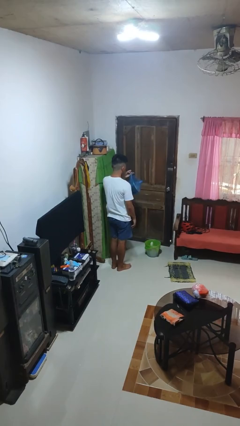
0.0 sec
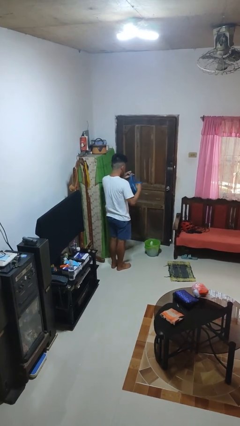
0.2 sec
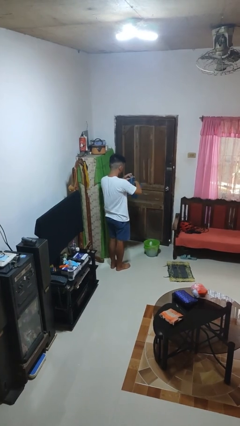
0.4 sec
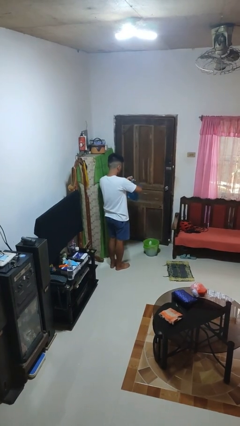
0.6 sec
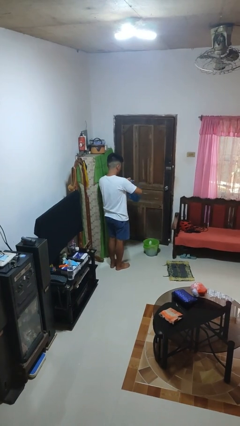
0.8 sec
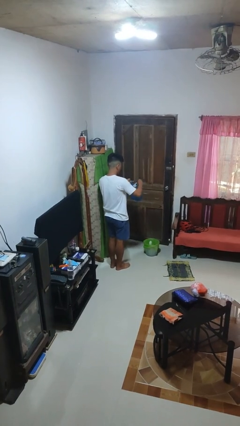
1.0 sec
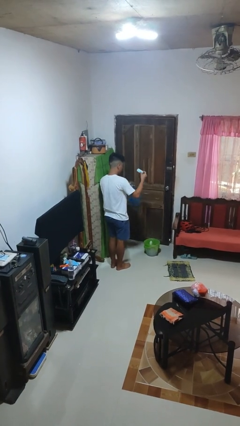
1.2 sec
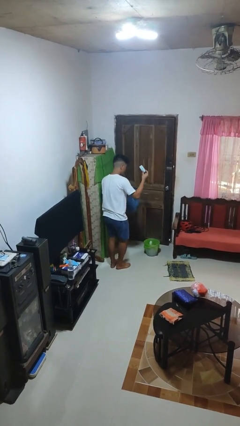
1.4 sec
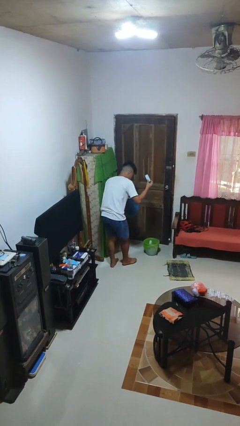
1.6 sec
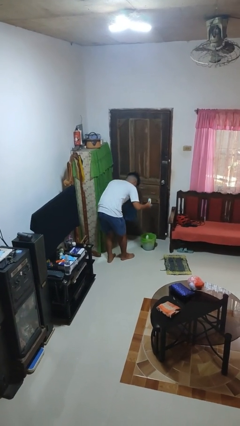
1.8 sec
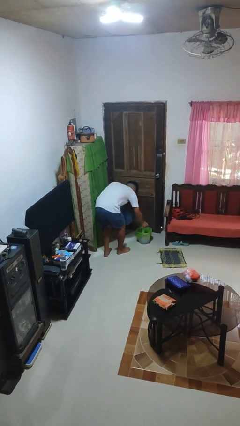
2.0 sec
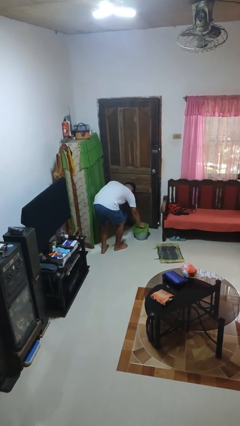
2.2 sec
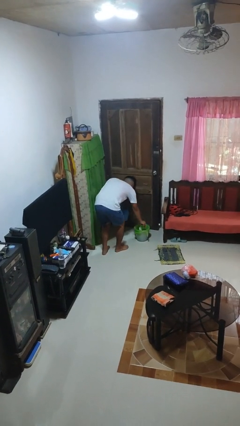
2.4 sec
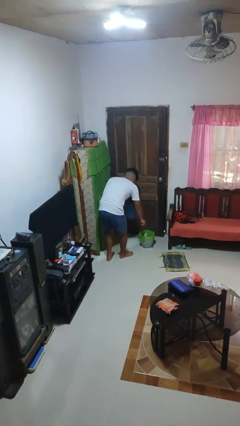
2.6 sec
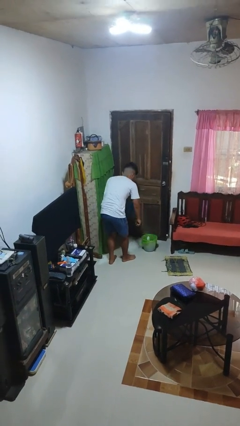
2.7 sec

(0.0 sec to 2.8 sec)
person discards trash

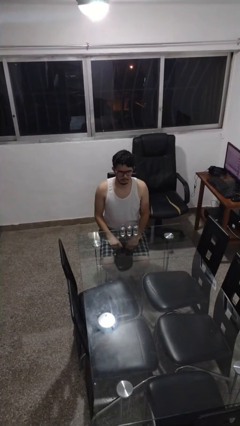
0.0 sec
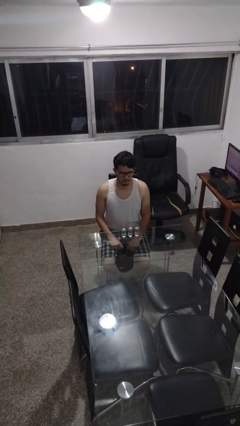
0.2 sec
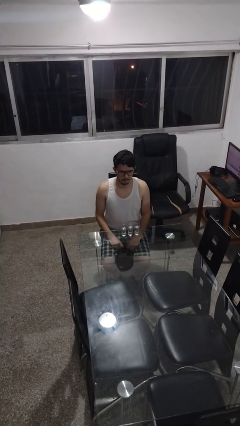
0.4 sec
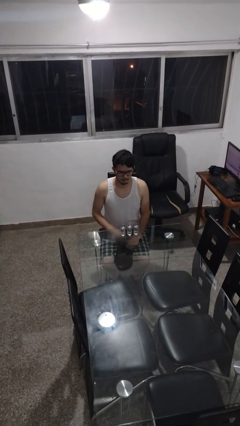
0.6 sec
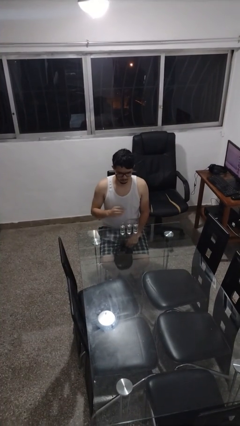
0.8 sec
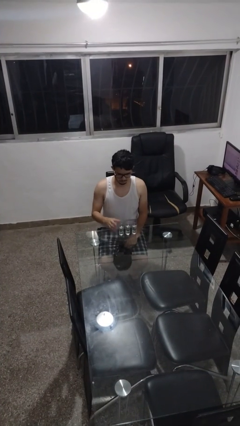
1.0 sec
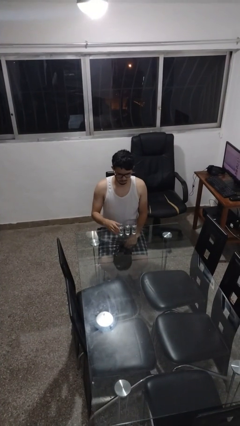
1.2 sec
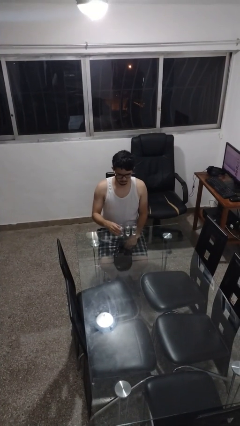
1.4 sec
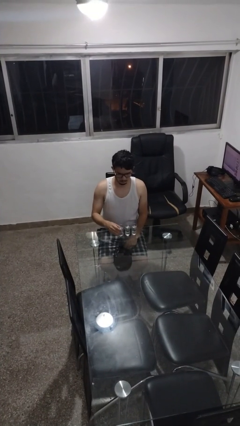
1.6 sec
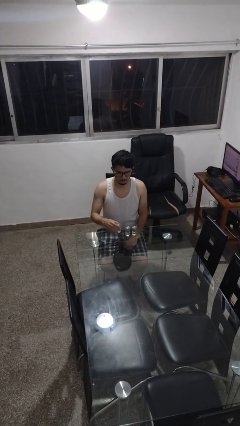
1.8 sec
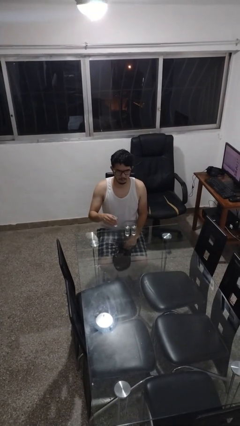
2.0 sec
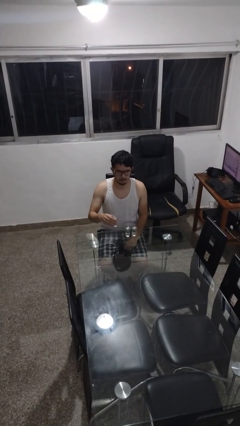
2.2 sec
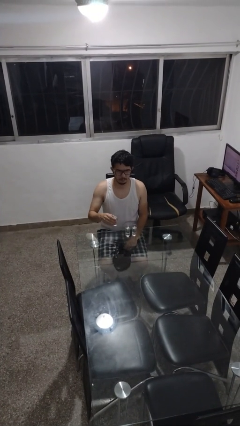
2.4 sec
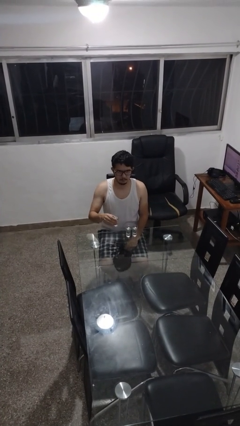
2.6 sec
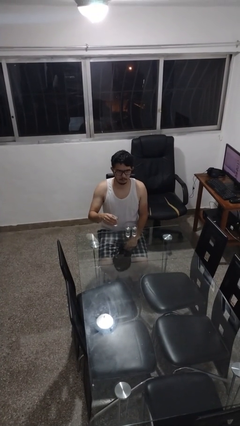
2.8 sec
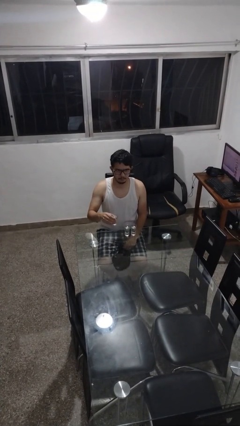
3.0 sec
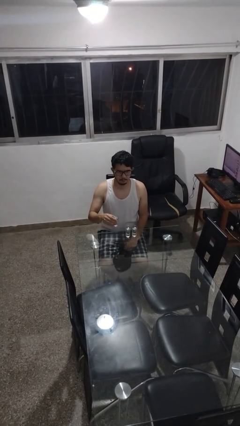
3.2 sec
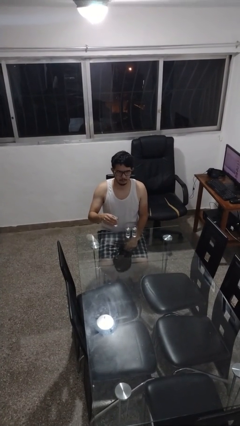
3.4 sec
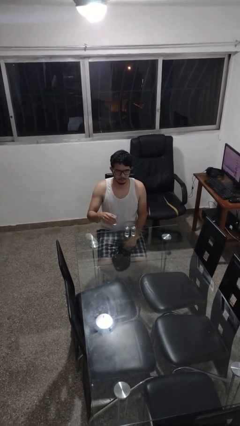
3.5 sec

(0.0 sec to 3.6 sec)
person picks up object from table

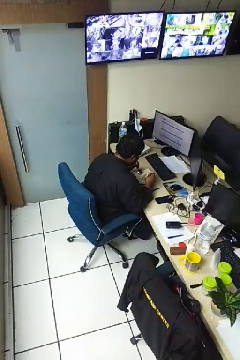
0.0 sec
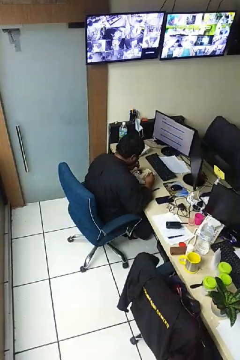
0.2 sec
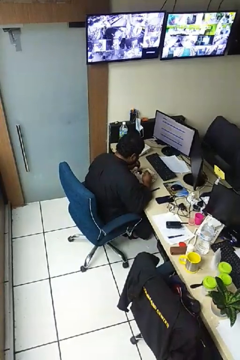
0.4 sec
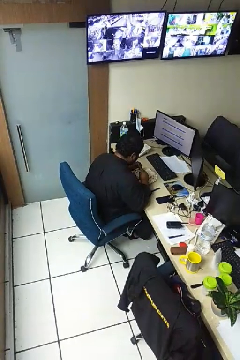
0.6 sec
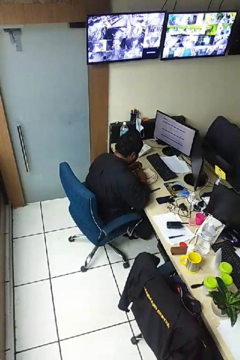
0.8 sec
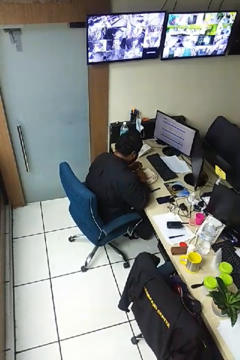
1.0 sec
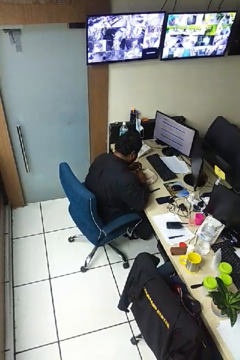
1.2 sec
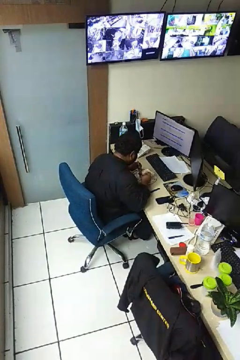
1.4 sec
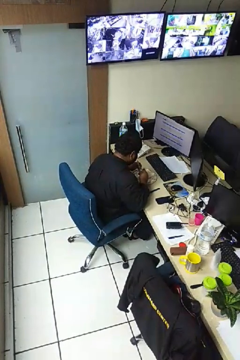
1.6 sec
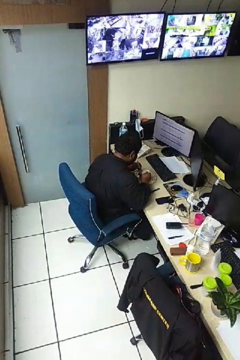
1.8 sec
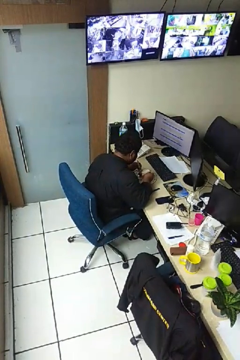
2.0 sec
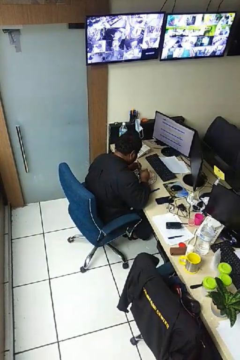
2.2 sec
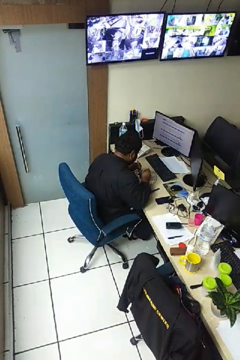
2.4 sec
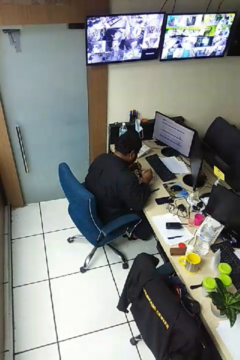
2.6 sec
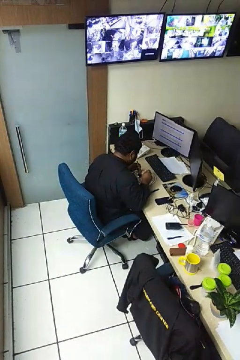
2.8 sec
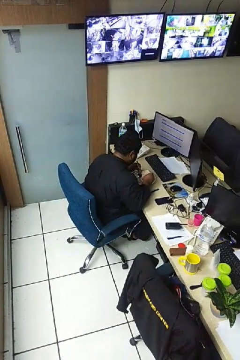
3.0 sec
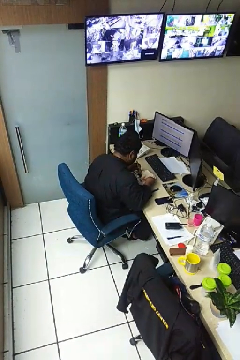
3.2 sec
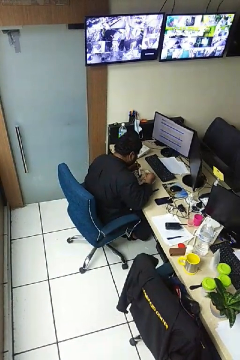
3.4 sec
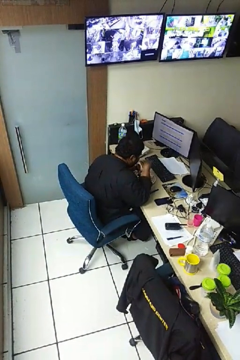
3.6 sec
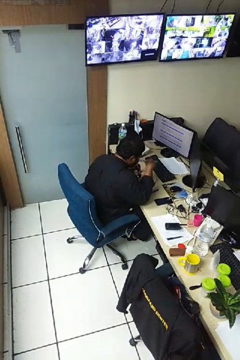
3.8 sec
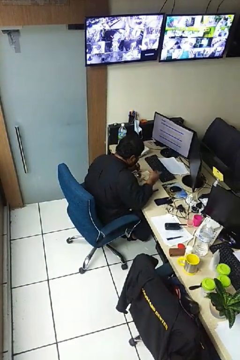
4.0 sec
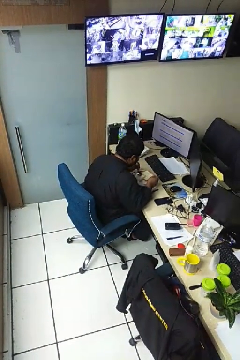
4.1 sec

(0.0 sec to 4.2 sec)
person eats with utensil

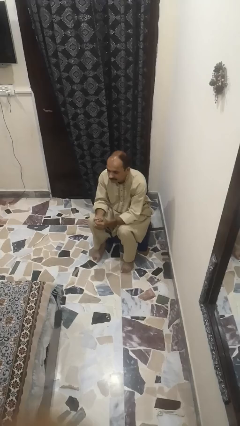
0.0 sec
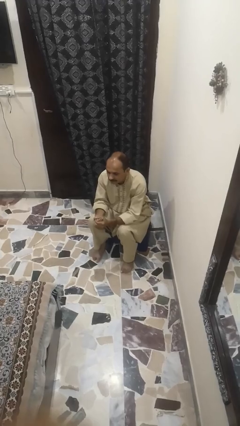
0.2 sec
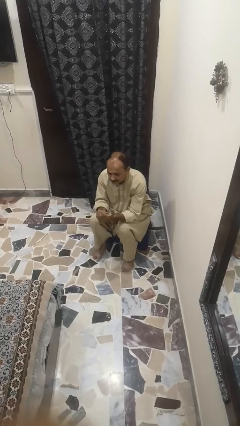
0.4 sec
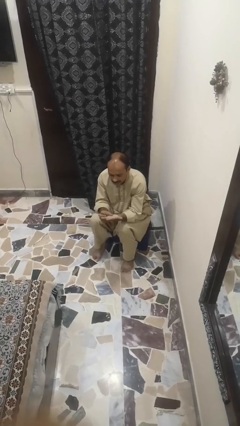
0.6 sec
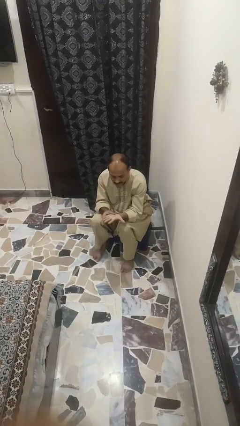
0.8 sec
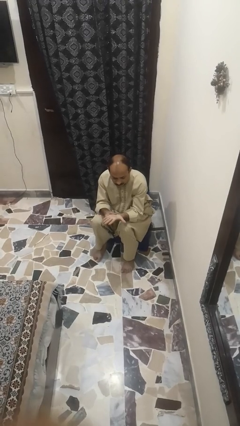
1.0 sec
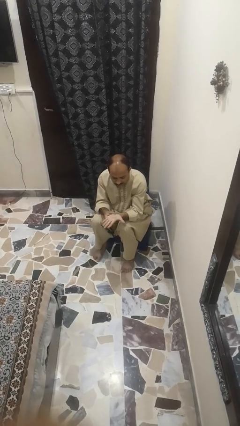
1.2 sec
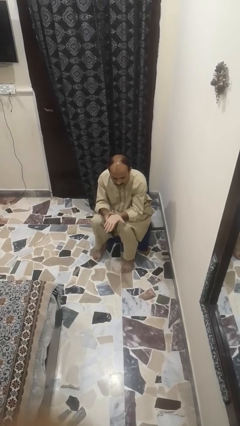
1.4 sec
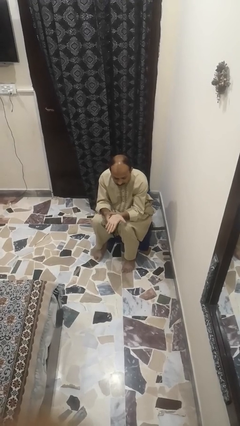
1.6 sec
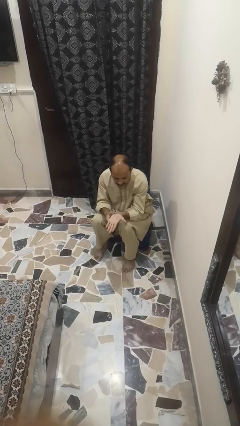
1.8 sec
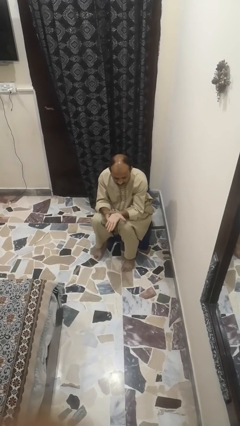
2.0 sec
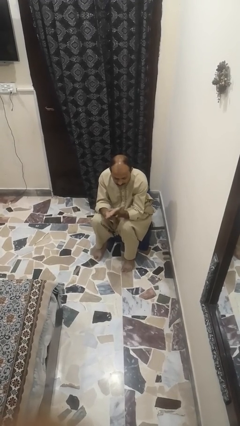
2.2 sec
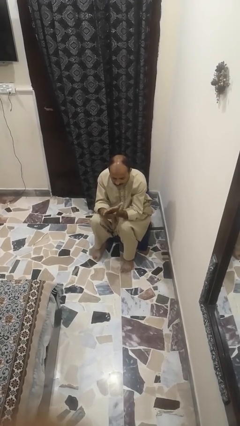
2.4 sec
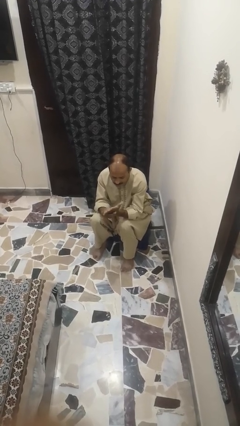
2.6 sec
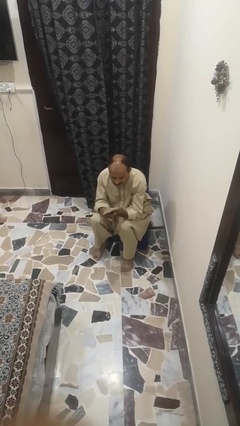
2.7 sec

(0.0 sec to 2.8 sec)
person looks at hands in lap

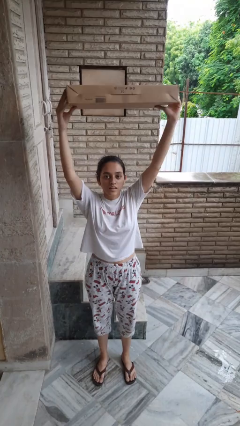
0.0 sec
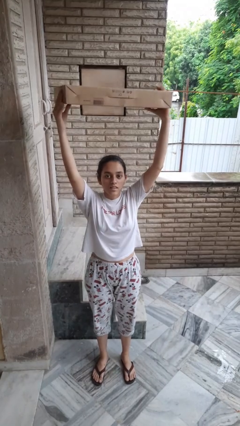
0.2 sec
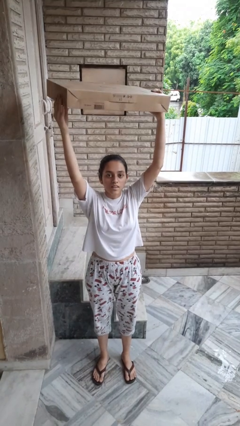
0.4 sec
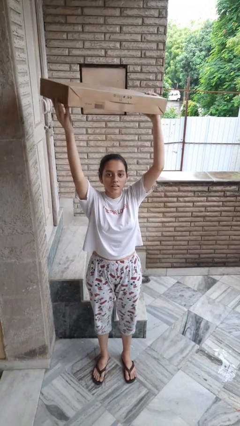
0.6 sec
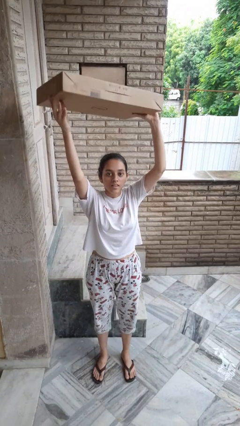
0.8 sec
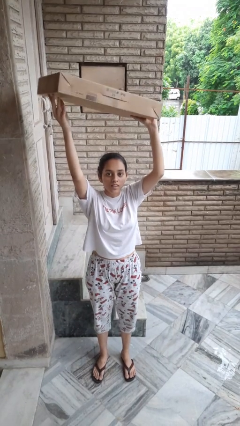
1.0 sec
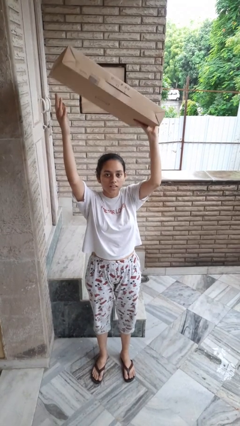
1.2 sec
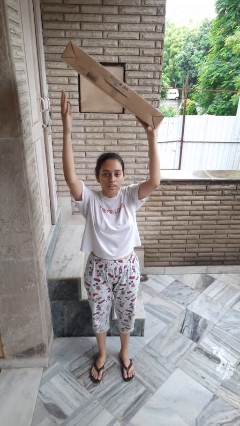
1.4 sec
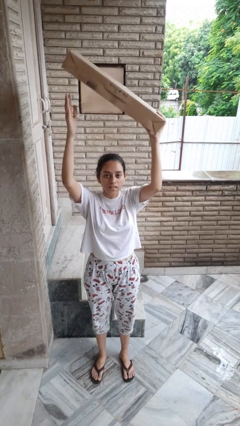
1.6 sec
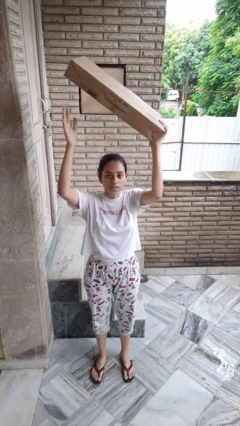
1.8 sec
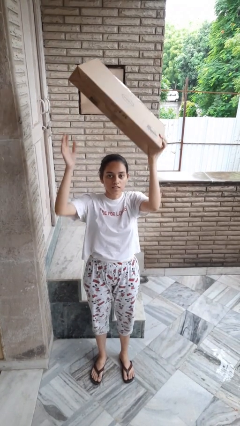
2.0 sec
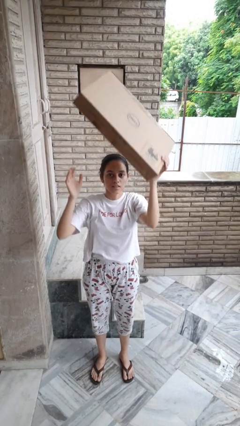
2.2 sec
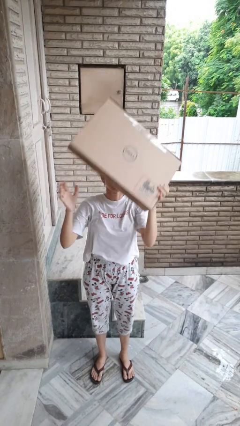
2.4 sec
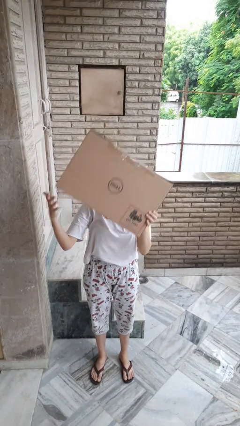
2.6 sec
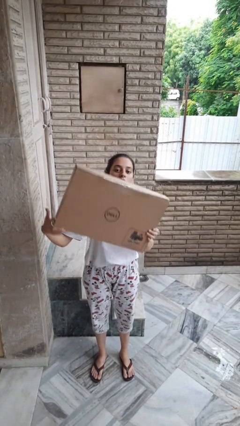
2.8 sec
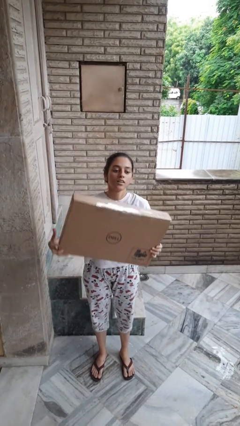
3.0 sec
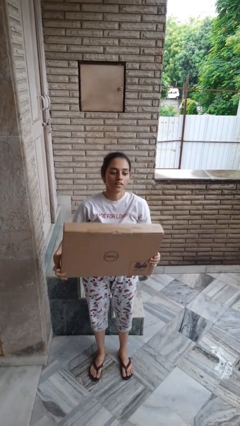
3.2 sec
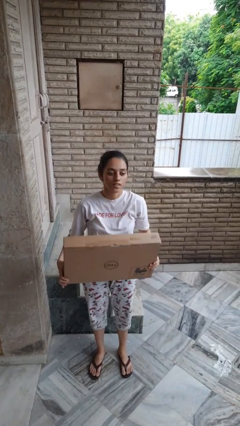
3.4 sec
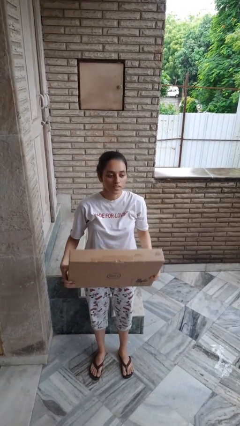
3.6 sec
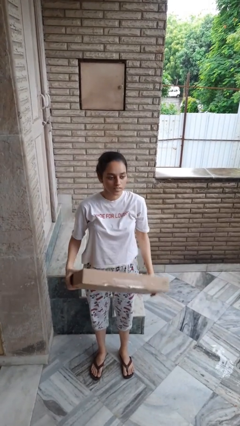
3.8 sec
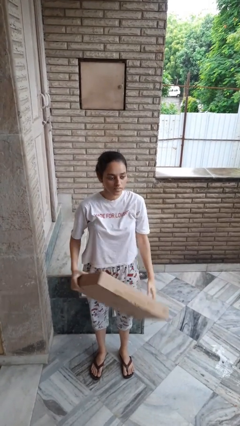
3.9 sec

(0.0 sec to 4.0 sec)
person holds object above head

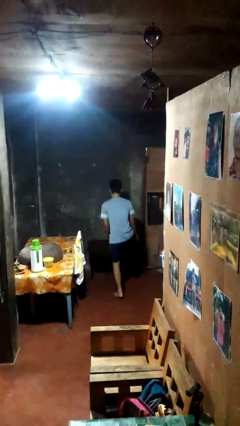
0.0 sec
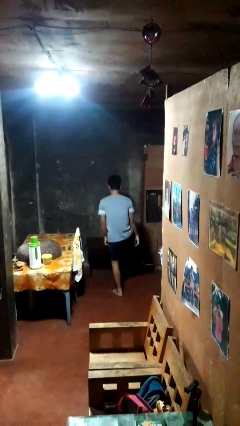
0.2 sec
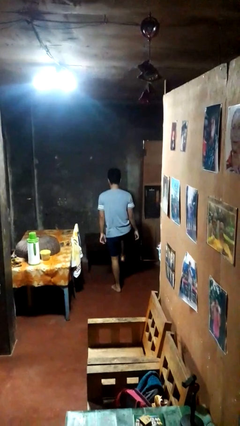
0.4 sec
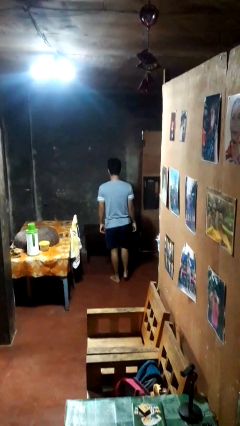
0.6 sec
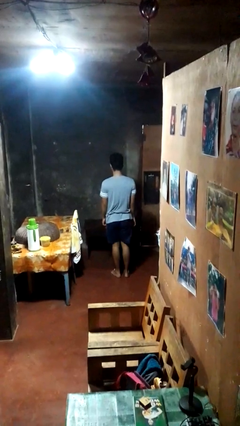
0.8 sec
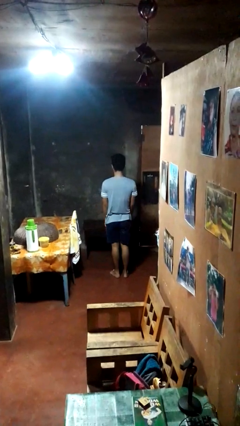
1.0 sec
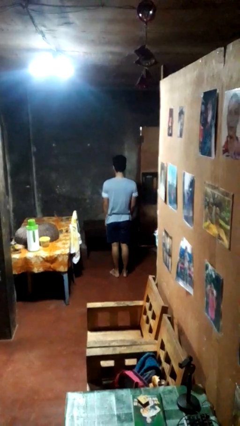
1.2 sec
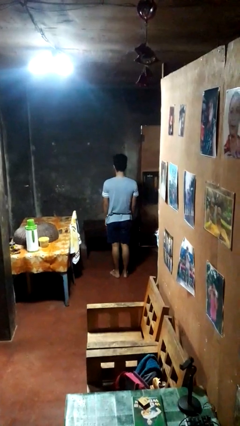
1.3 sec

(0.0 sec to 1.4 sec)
person climbs off table
